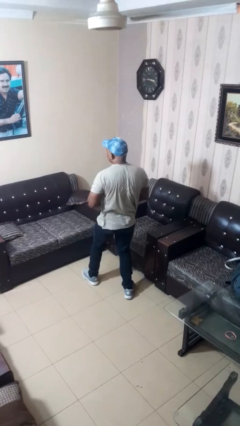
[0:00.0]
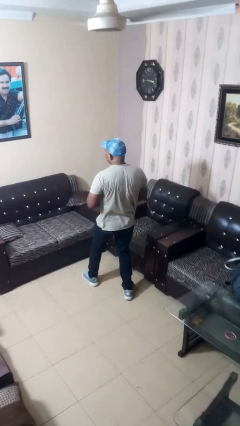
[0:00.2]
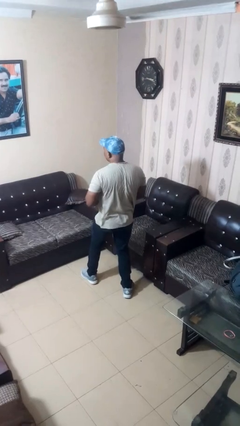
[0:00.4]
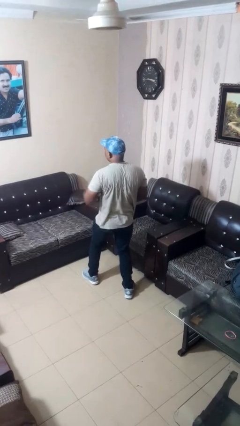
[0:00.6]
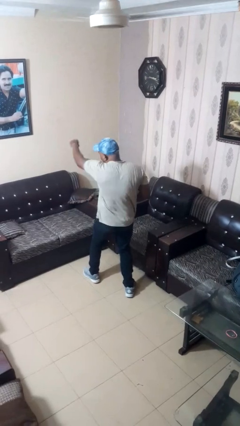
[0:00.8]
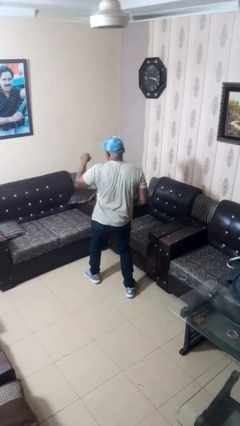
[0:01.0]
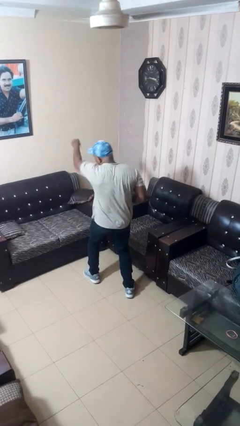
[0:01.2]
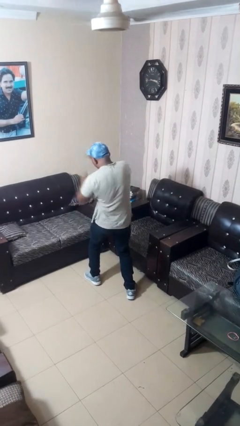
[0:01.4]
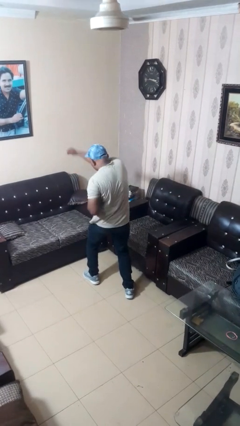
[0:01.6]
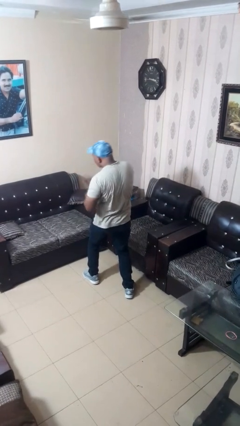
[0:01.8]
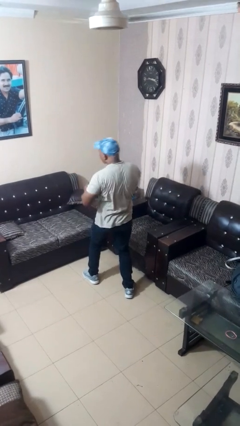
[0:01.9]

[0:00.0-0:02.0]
person punches

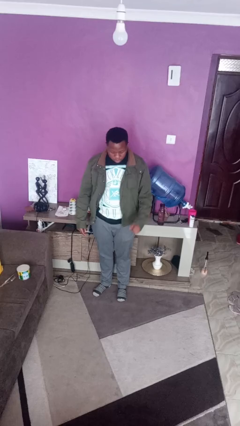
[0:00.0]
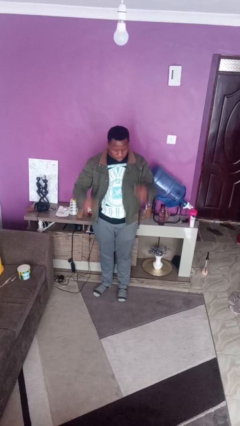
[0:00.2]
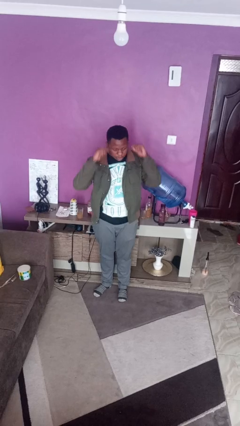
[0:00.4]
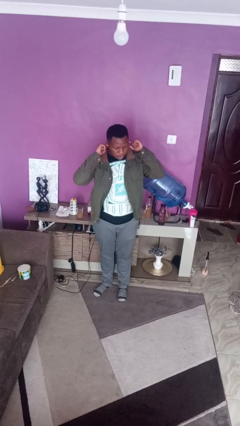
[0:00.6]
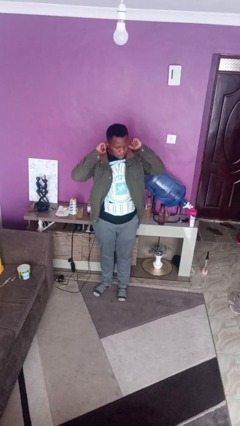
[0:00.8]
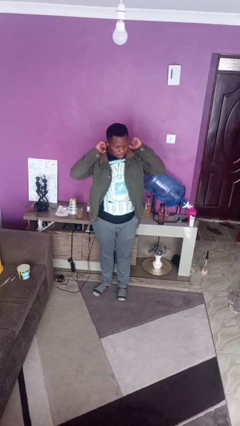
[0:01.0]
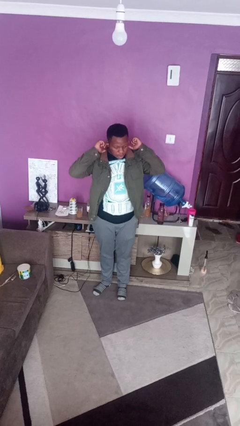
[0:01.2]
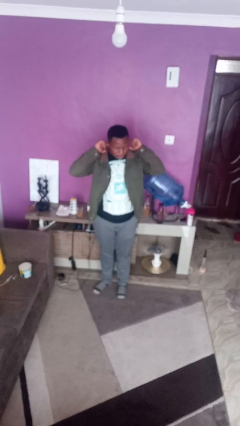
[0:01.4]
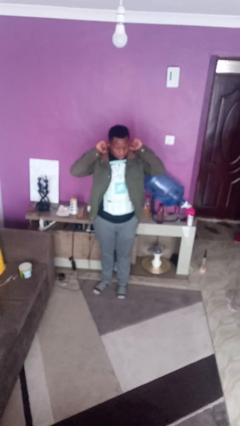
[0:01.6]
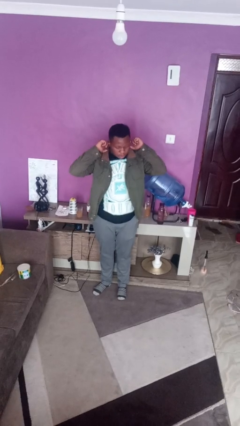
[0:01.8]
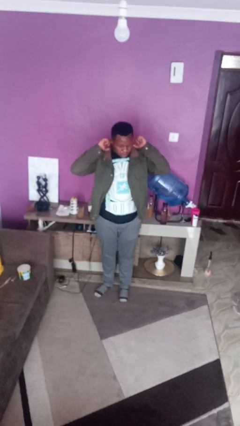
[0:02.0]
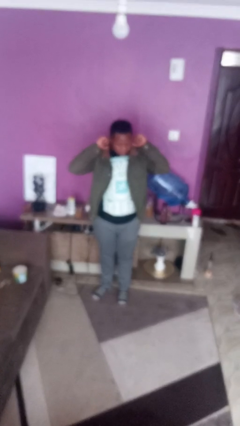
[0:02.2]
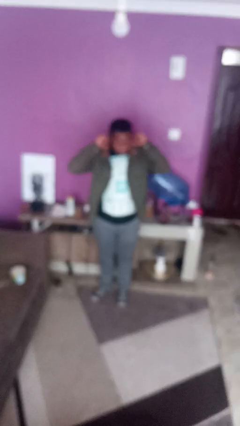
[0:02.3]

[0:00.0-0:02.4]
person puts fingers in ear

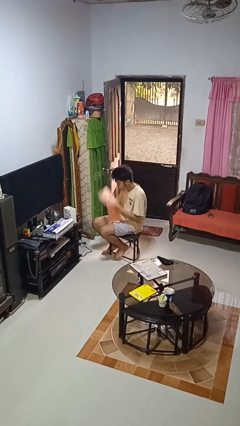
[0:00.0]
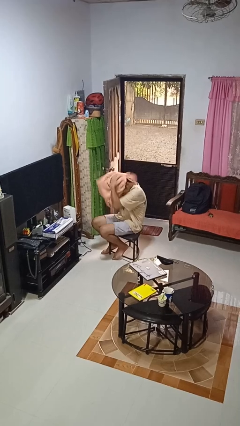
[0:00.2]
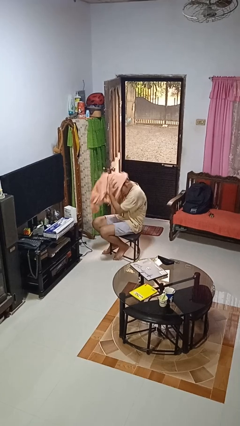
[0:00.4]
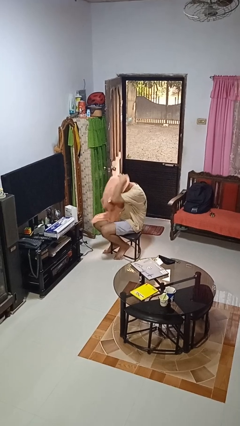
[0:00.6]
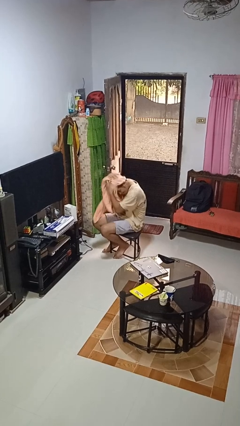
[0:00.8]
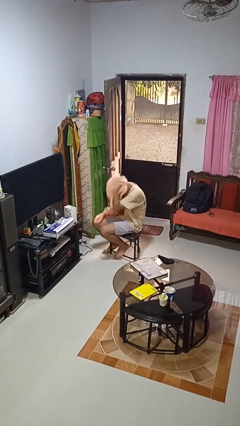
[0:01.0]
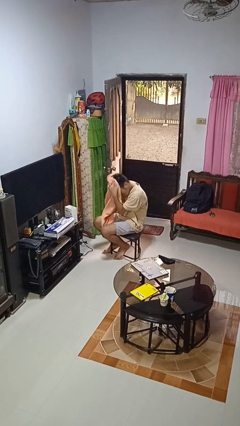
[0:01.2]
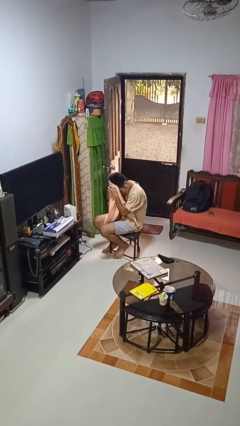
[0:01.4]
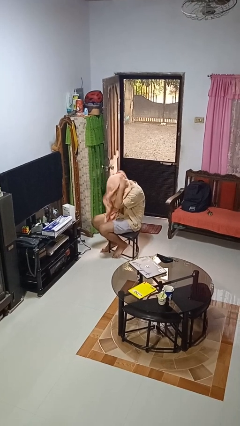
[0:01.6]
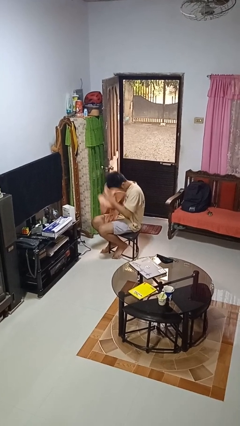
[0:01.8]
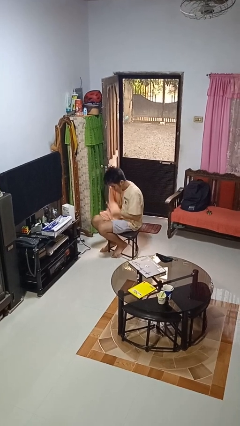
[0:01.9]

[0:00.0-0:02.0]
person dries hair with towel

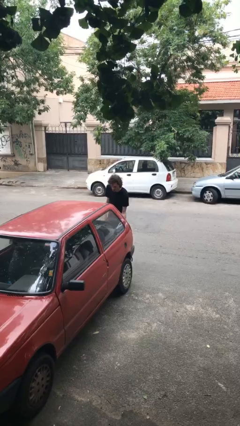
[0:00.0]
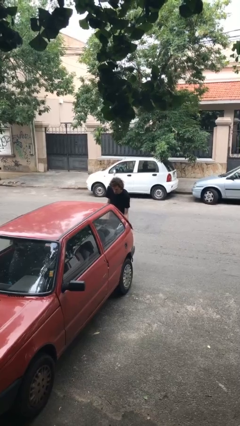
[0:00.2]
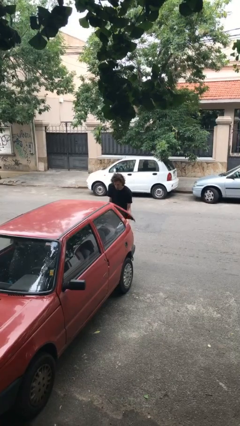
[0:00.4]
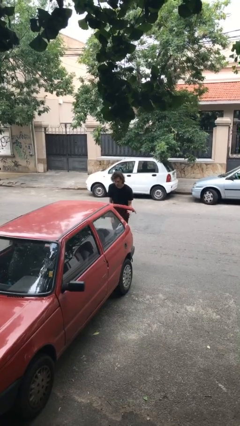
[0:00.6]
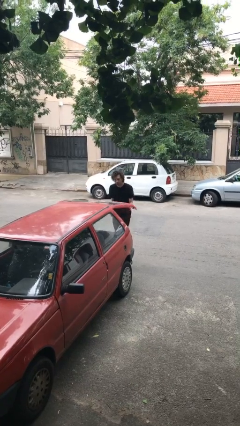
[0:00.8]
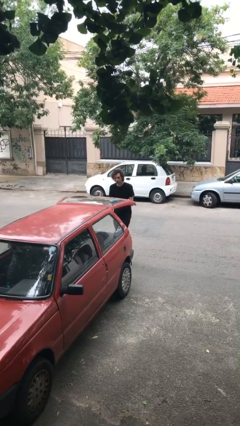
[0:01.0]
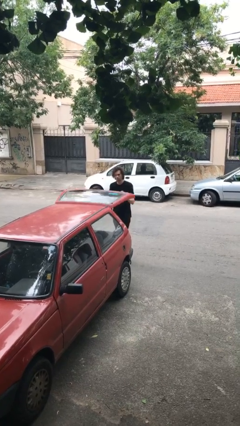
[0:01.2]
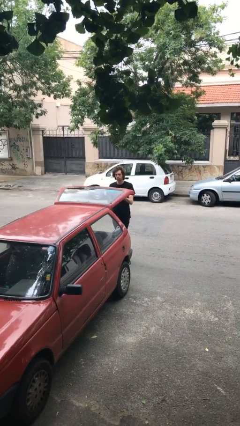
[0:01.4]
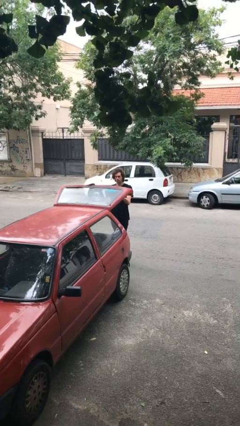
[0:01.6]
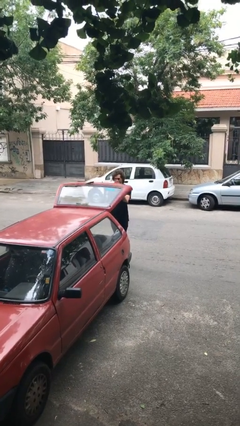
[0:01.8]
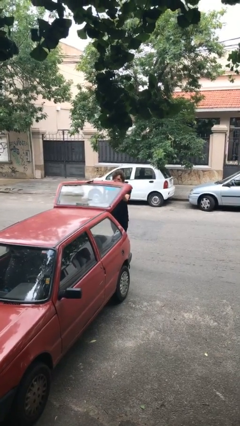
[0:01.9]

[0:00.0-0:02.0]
person opens car trunk

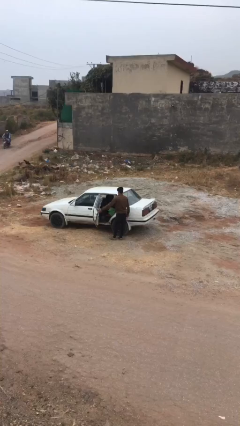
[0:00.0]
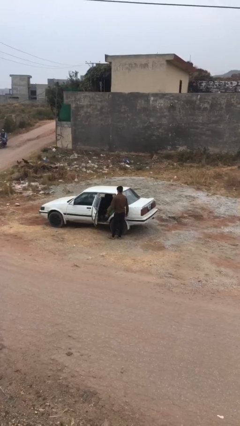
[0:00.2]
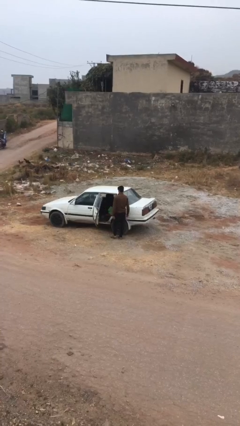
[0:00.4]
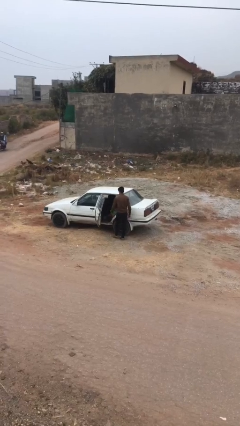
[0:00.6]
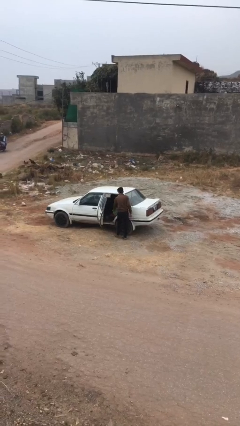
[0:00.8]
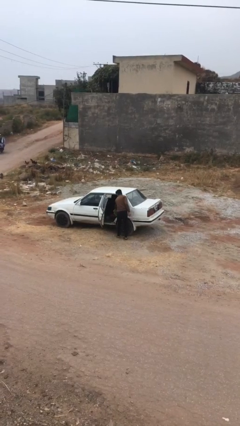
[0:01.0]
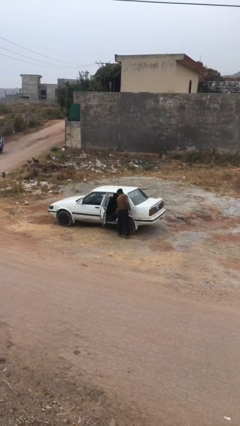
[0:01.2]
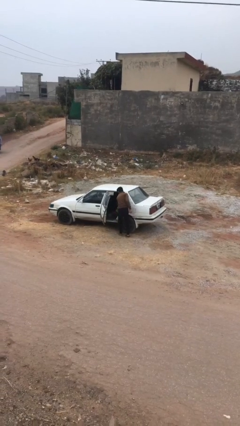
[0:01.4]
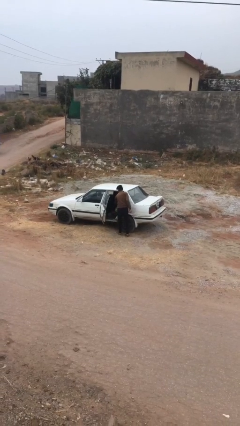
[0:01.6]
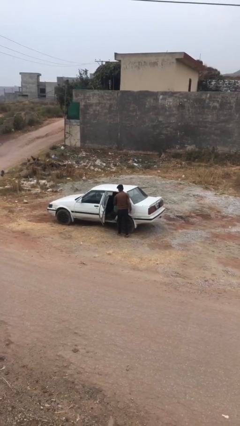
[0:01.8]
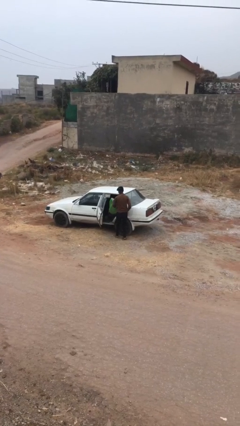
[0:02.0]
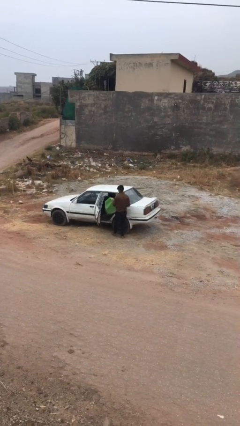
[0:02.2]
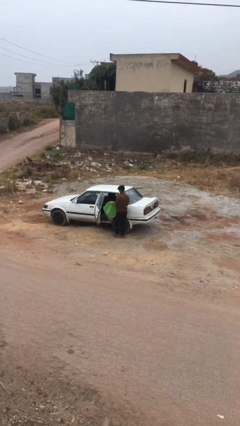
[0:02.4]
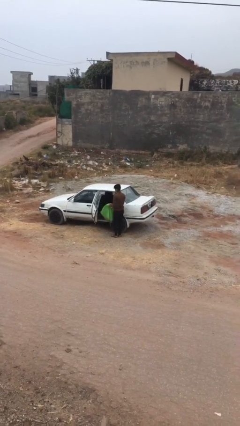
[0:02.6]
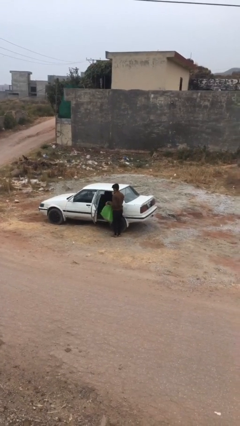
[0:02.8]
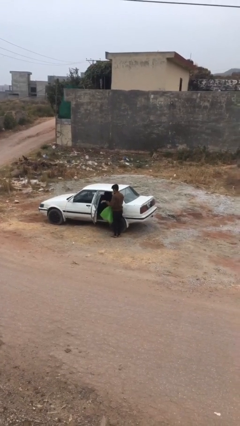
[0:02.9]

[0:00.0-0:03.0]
person unloads car

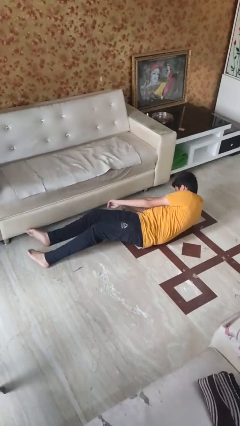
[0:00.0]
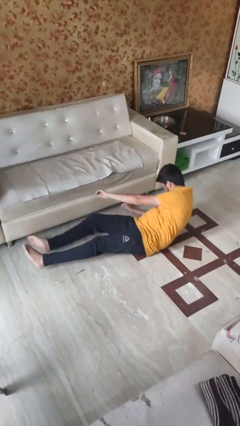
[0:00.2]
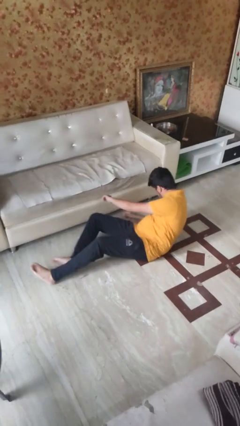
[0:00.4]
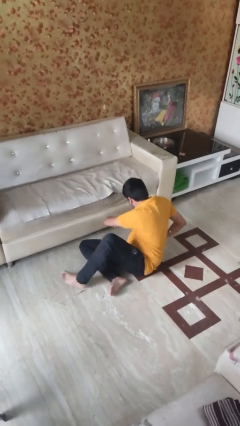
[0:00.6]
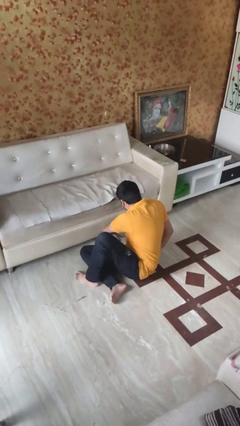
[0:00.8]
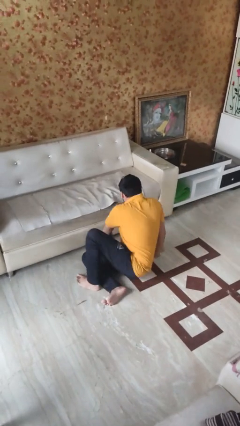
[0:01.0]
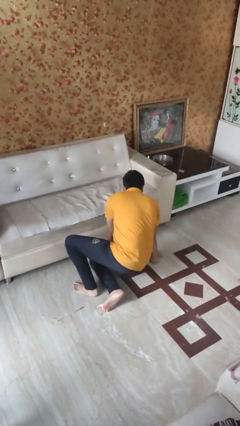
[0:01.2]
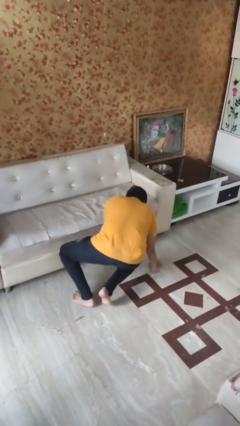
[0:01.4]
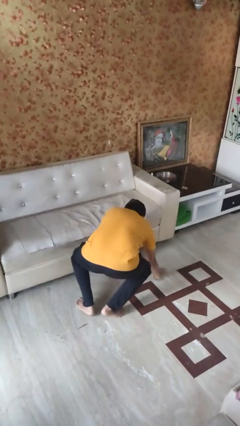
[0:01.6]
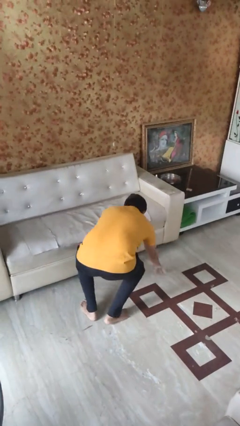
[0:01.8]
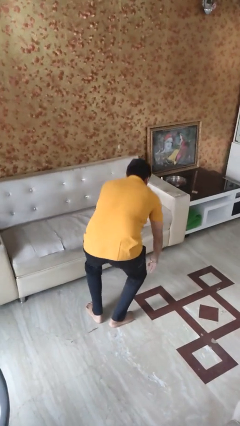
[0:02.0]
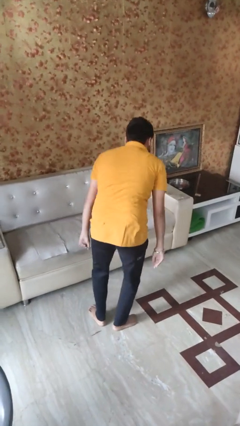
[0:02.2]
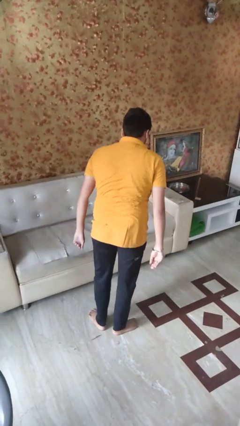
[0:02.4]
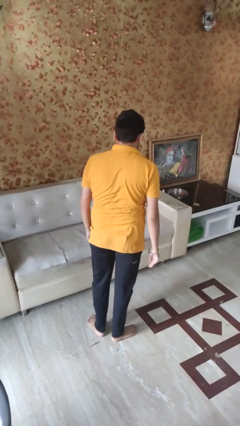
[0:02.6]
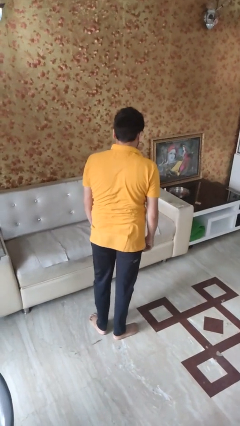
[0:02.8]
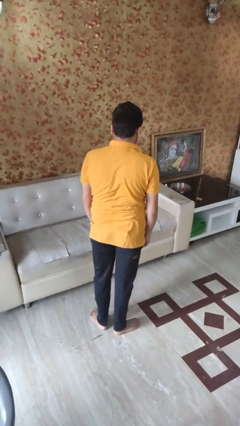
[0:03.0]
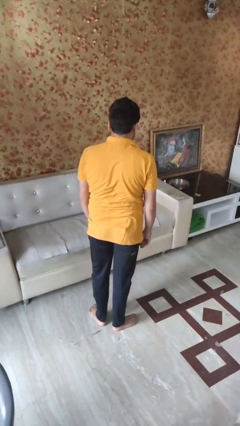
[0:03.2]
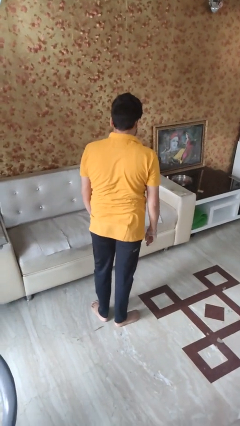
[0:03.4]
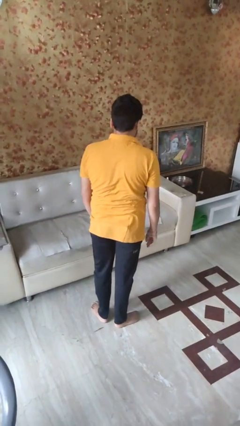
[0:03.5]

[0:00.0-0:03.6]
person stands up from floor

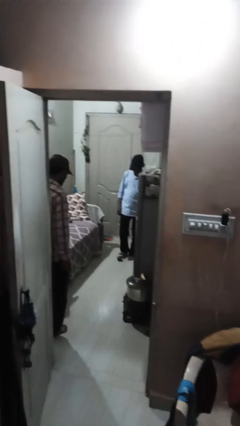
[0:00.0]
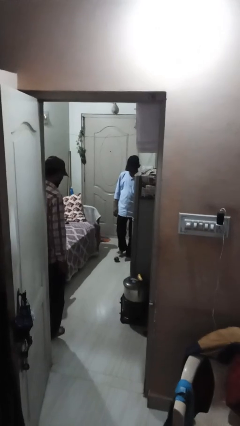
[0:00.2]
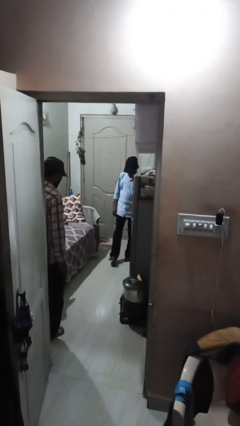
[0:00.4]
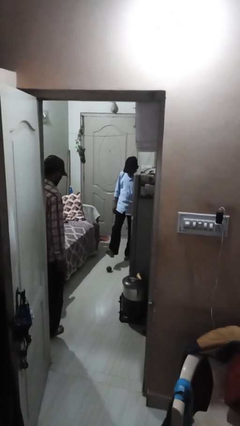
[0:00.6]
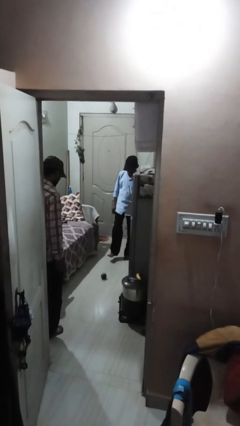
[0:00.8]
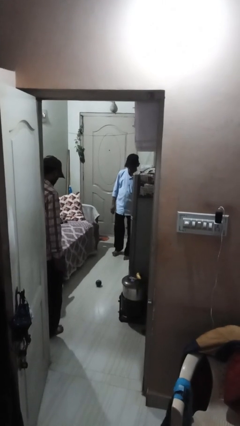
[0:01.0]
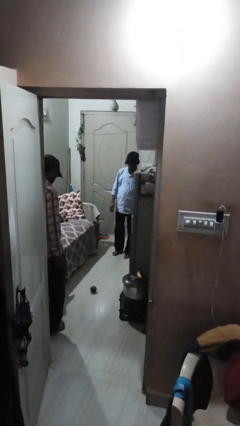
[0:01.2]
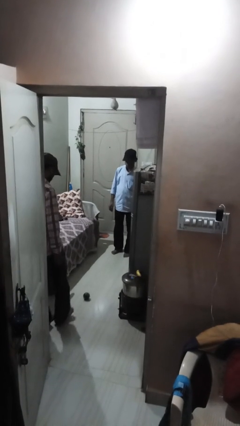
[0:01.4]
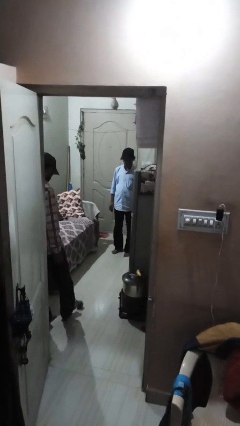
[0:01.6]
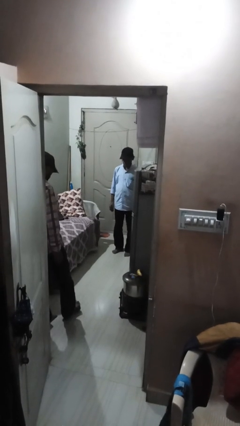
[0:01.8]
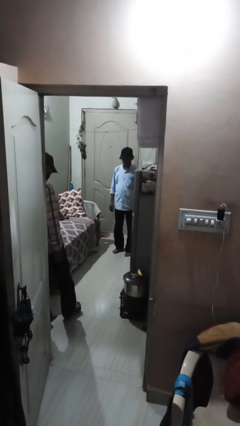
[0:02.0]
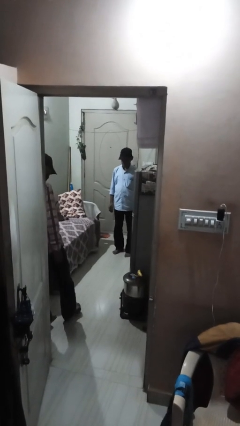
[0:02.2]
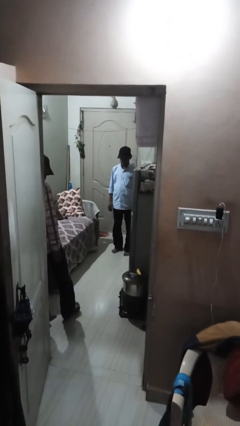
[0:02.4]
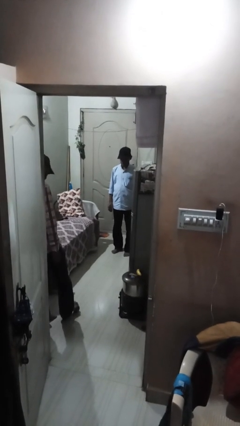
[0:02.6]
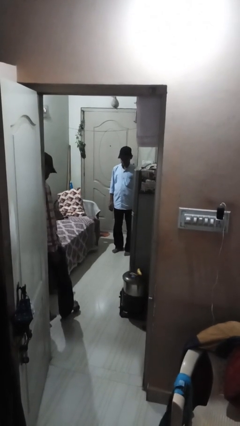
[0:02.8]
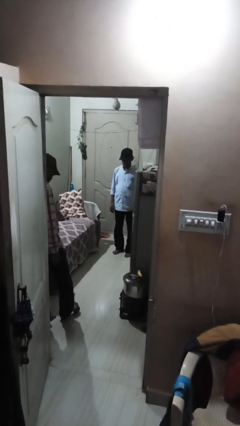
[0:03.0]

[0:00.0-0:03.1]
person kicks object to person
